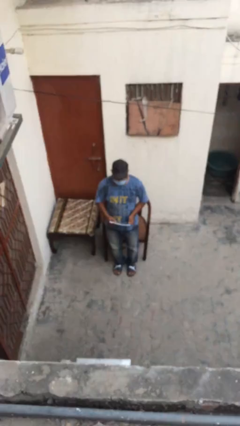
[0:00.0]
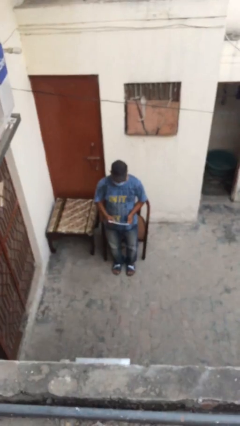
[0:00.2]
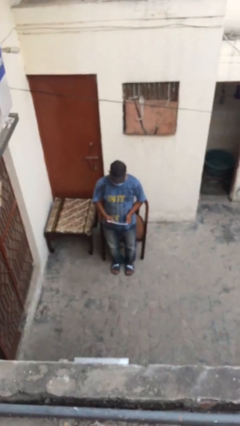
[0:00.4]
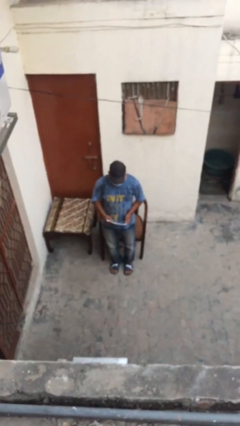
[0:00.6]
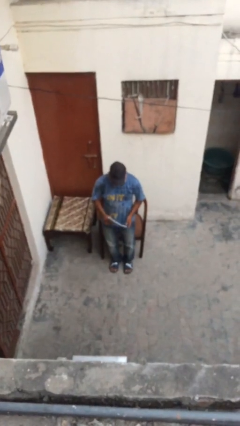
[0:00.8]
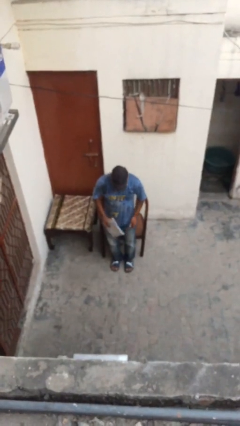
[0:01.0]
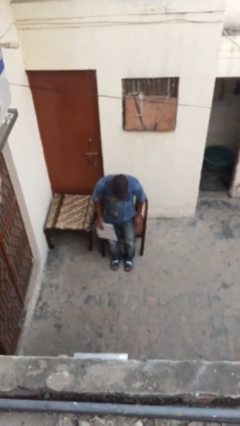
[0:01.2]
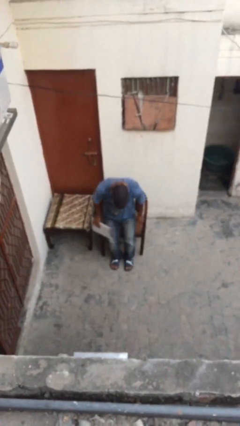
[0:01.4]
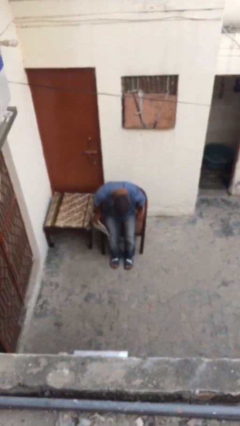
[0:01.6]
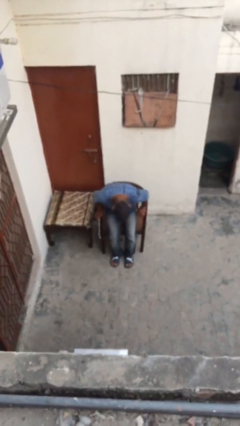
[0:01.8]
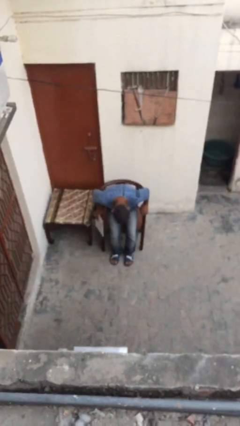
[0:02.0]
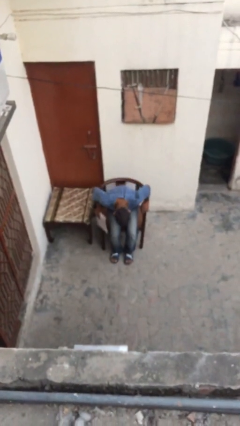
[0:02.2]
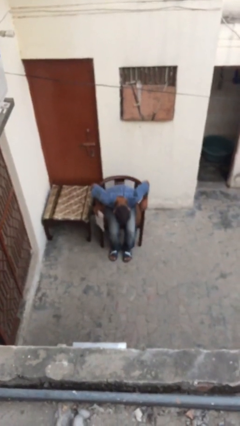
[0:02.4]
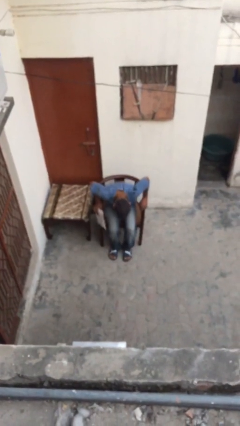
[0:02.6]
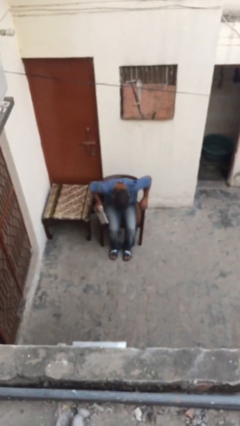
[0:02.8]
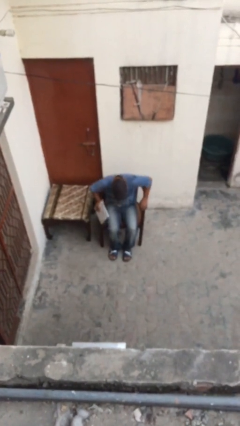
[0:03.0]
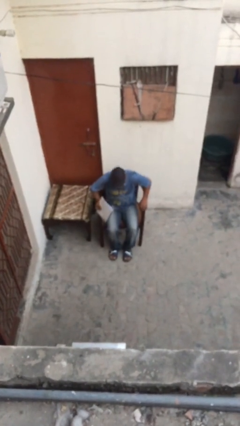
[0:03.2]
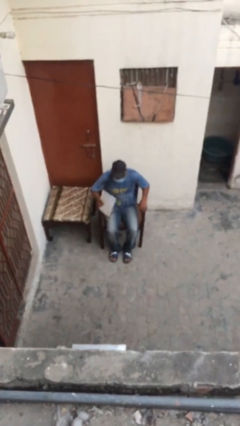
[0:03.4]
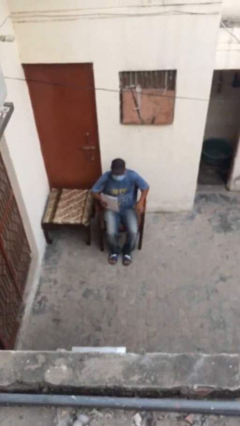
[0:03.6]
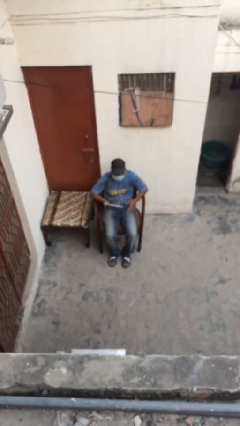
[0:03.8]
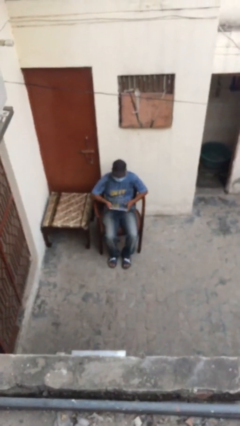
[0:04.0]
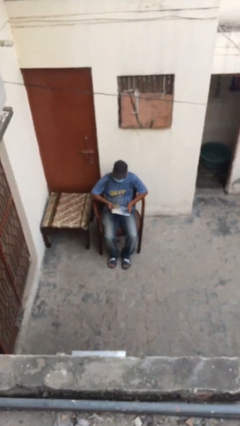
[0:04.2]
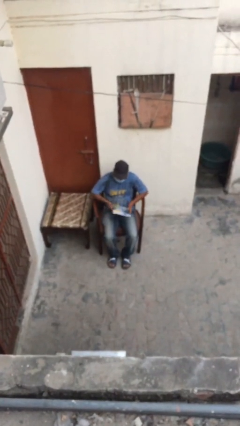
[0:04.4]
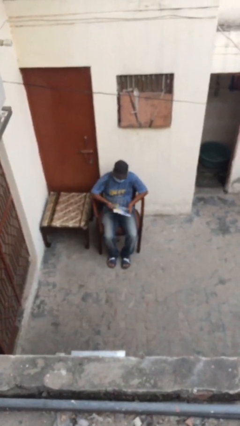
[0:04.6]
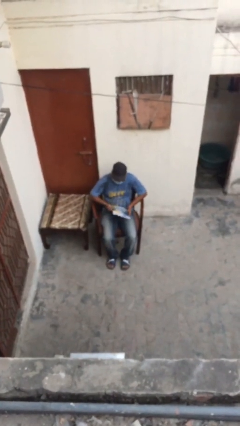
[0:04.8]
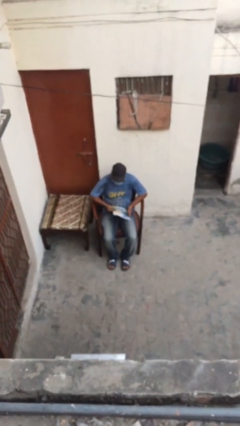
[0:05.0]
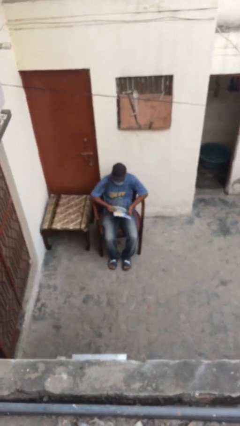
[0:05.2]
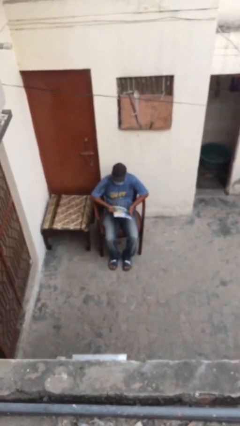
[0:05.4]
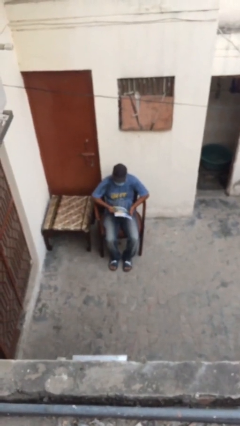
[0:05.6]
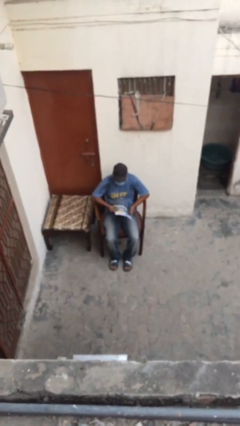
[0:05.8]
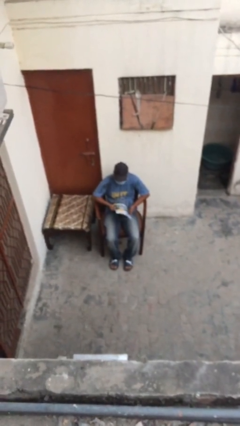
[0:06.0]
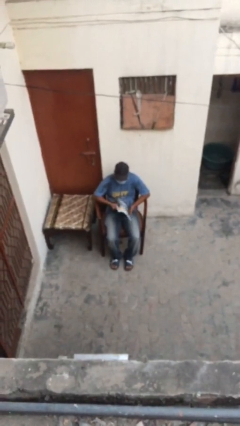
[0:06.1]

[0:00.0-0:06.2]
person sits down

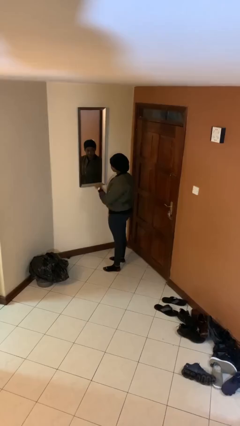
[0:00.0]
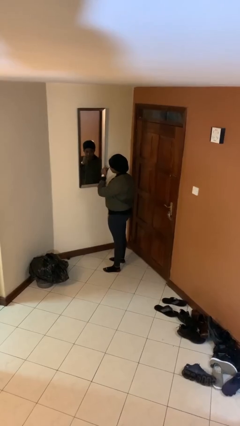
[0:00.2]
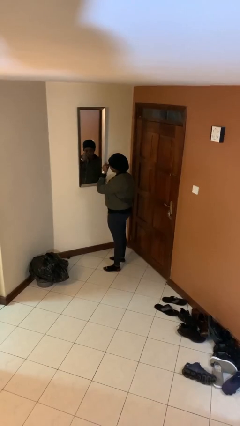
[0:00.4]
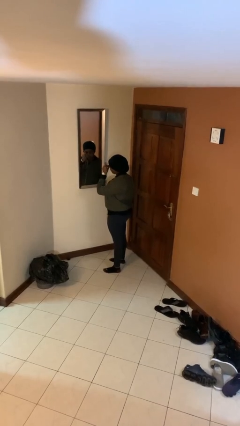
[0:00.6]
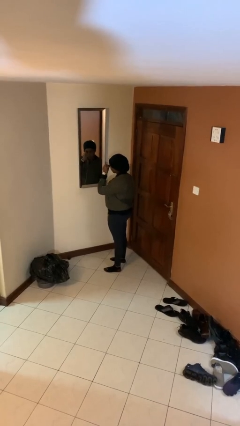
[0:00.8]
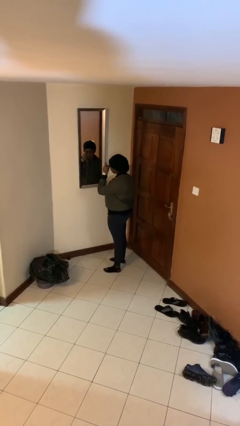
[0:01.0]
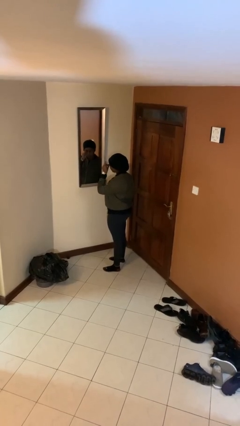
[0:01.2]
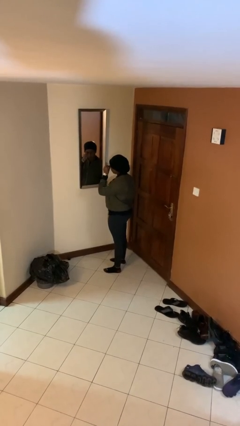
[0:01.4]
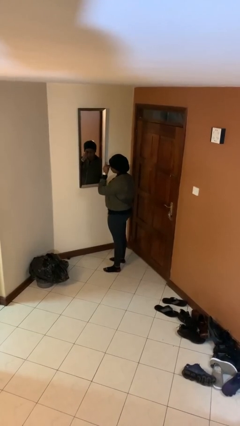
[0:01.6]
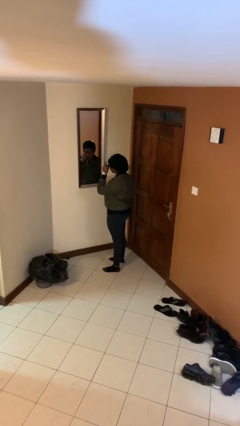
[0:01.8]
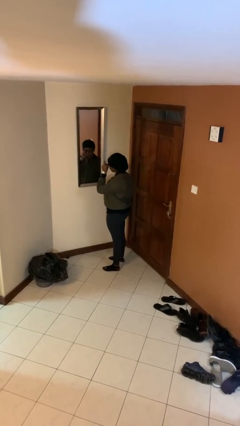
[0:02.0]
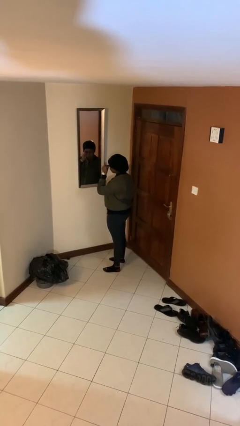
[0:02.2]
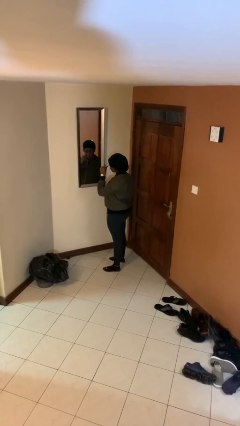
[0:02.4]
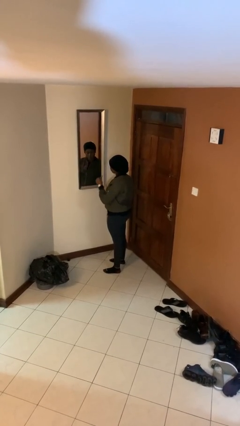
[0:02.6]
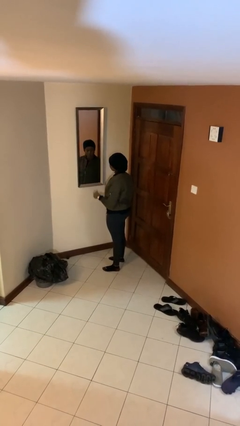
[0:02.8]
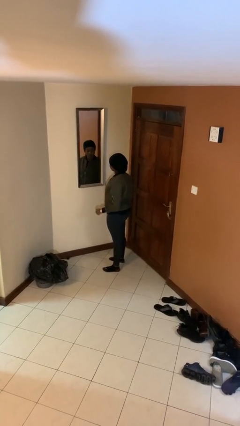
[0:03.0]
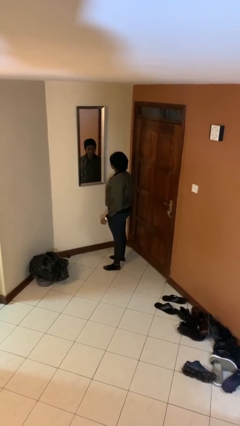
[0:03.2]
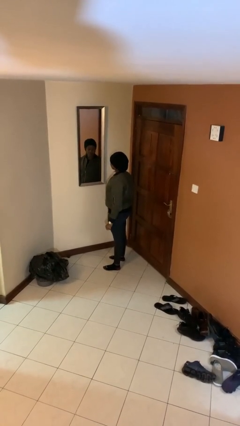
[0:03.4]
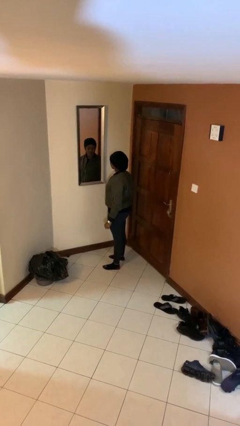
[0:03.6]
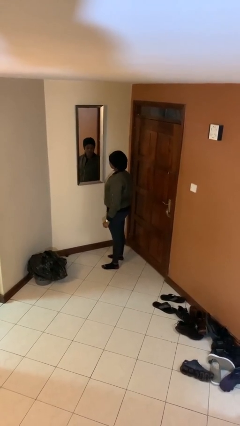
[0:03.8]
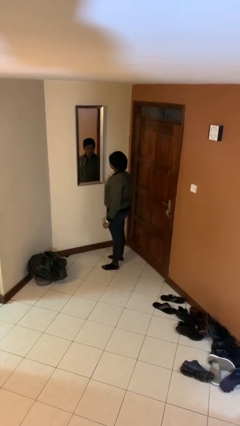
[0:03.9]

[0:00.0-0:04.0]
person applies eye makeup

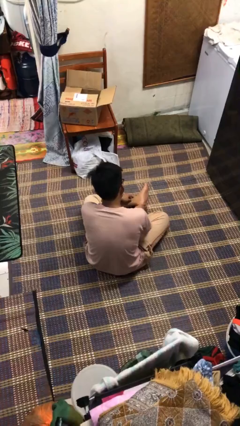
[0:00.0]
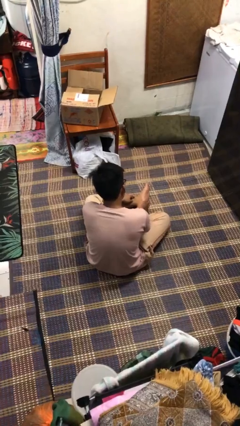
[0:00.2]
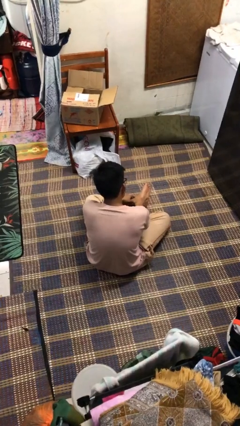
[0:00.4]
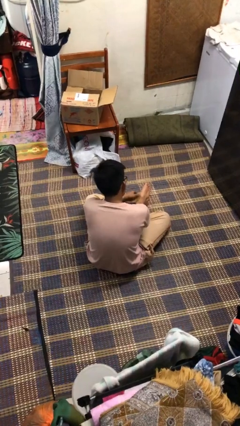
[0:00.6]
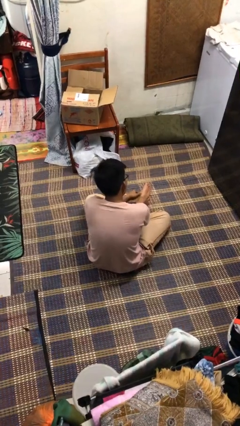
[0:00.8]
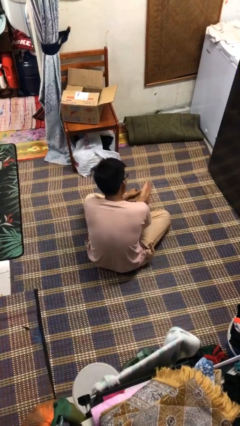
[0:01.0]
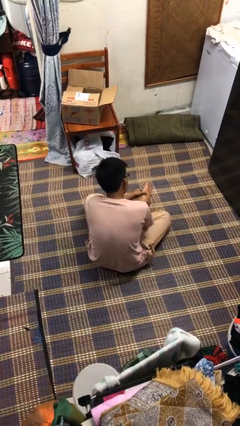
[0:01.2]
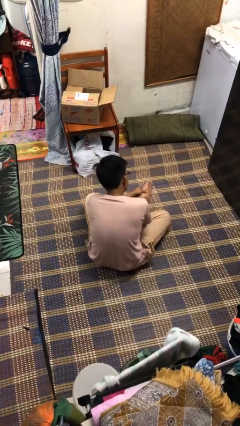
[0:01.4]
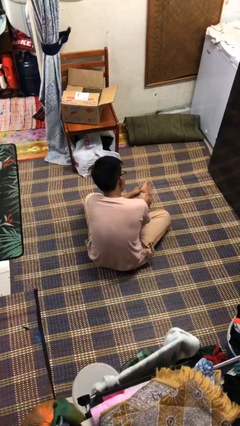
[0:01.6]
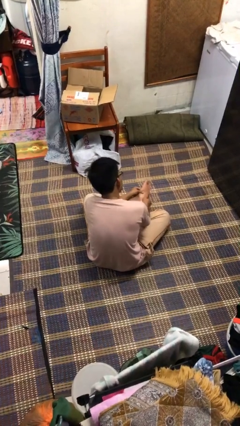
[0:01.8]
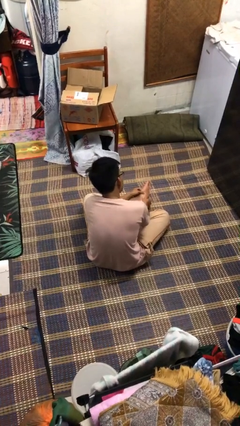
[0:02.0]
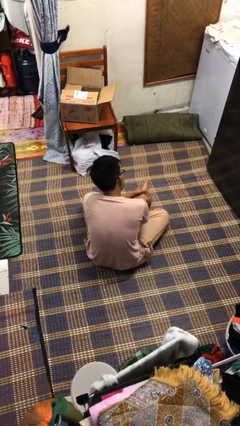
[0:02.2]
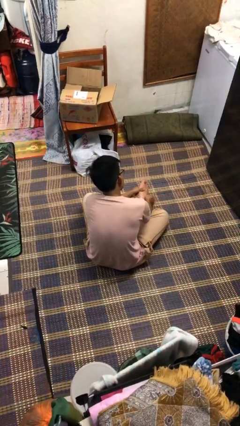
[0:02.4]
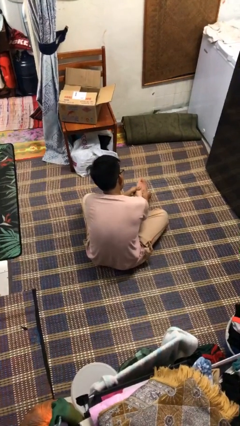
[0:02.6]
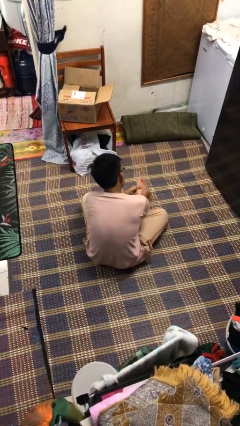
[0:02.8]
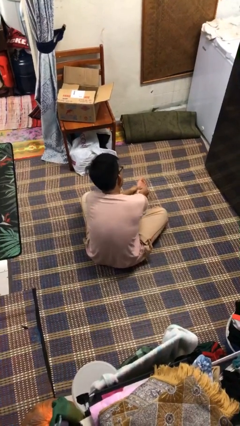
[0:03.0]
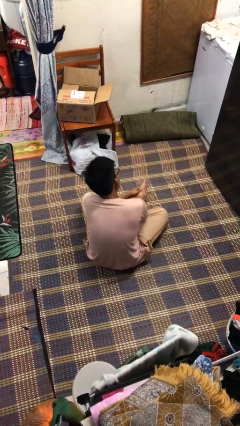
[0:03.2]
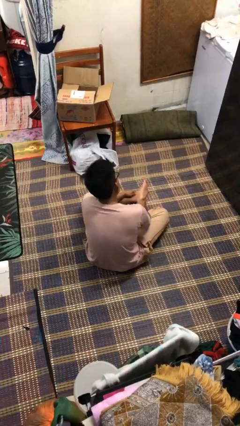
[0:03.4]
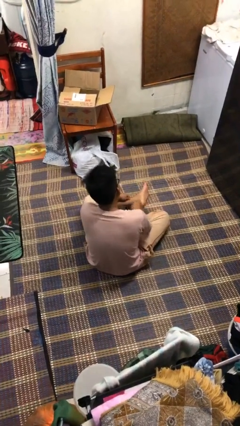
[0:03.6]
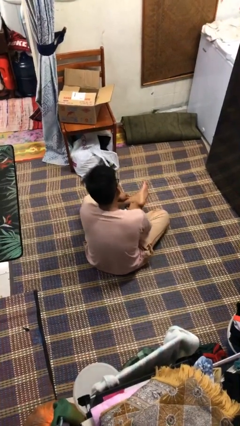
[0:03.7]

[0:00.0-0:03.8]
person rubs foot

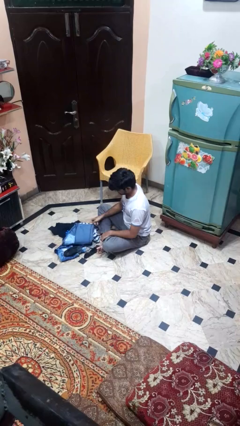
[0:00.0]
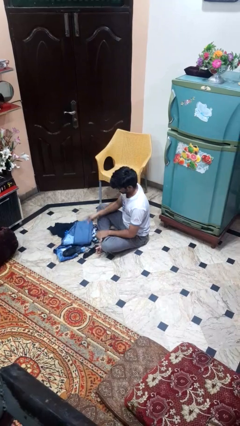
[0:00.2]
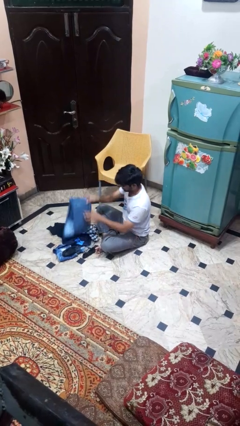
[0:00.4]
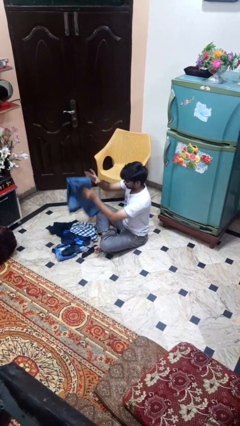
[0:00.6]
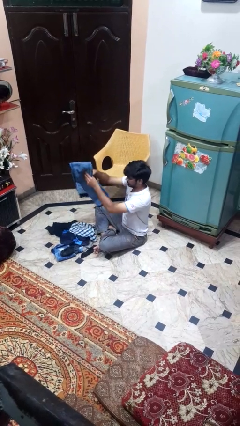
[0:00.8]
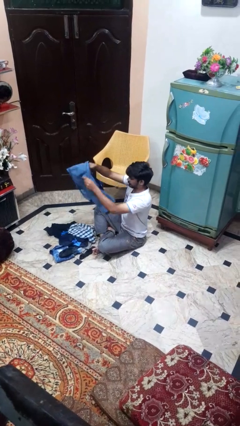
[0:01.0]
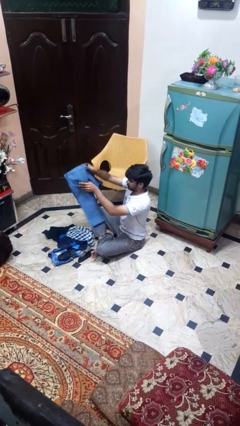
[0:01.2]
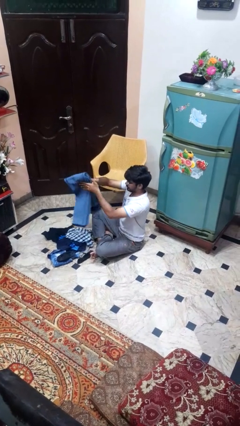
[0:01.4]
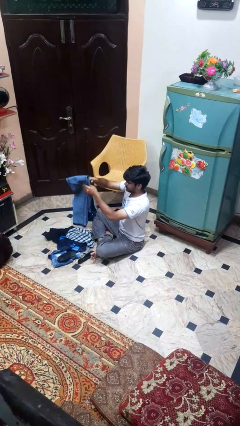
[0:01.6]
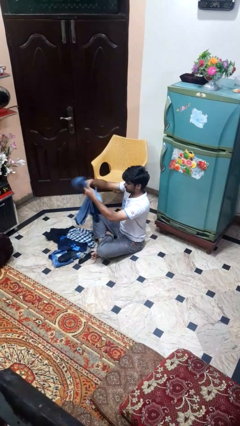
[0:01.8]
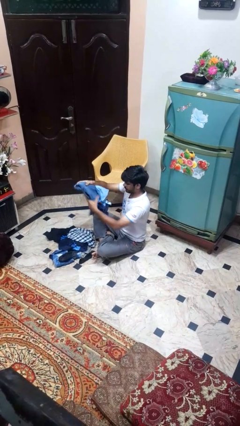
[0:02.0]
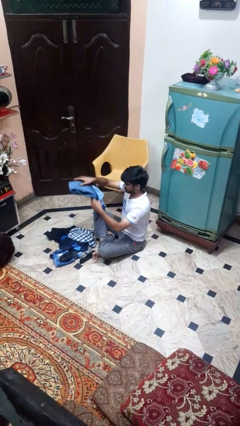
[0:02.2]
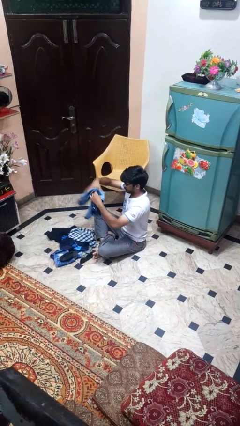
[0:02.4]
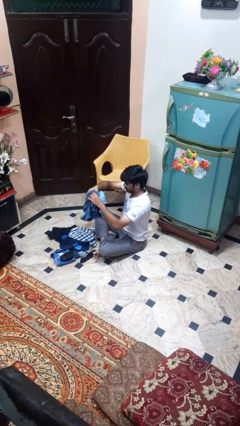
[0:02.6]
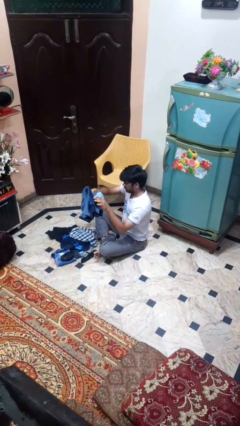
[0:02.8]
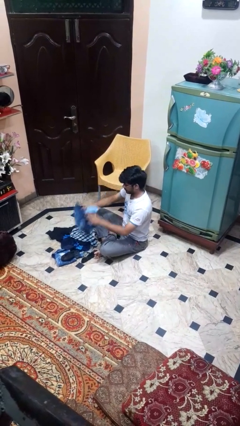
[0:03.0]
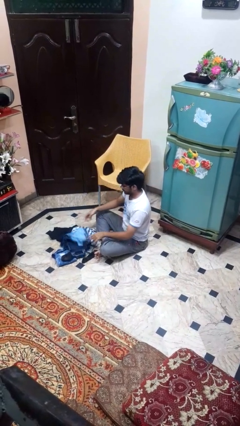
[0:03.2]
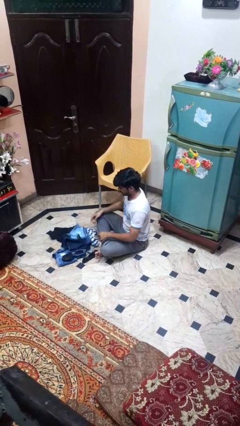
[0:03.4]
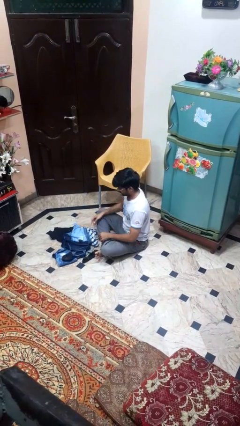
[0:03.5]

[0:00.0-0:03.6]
person folds pants
